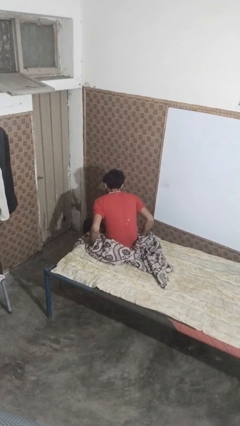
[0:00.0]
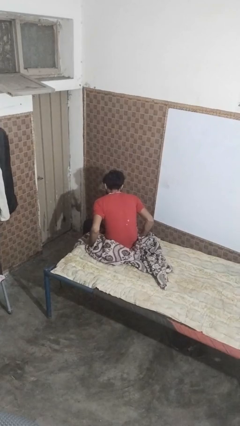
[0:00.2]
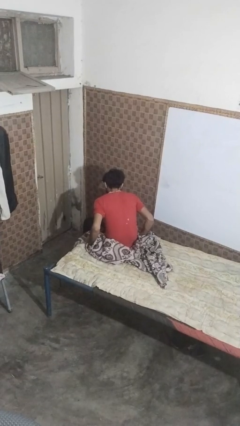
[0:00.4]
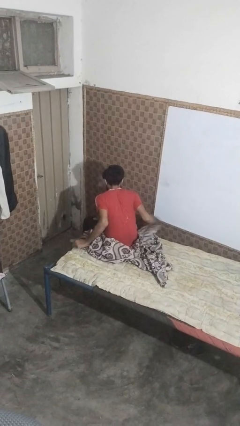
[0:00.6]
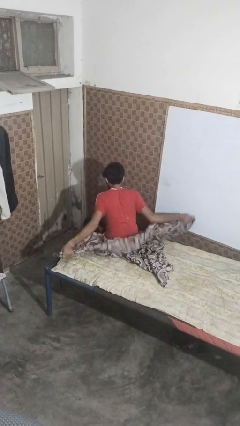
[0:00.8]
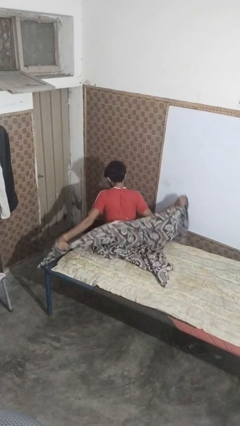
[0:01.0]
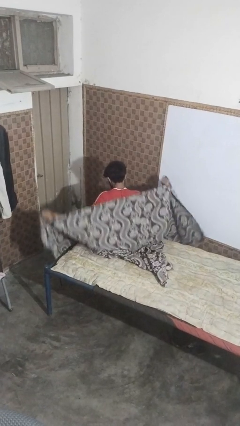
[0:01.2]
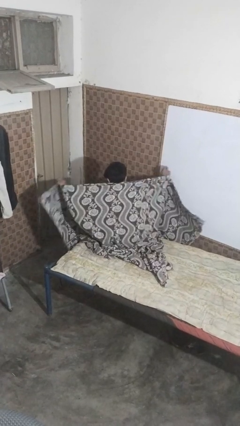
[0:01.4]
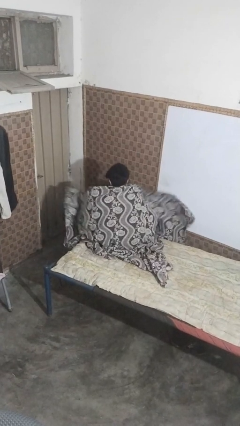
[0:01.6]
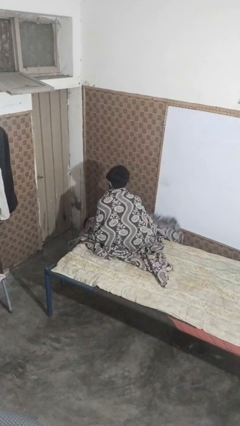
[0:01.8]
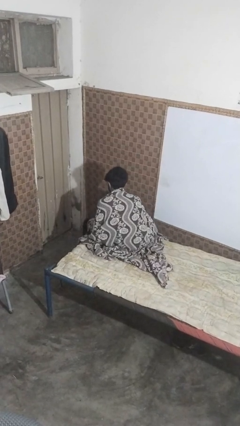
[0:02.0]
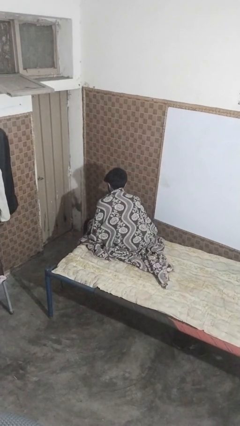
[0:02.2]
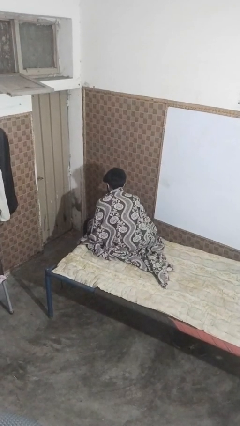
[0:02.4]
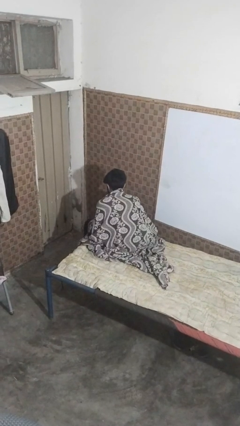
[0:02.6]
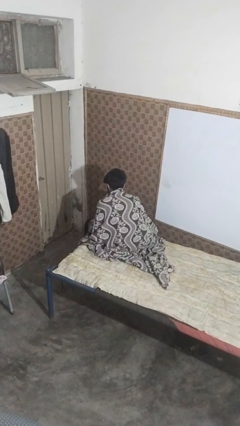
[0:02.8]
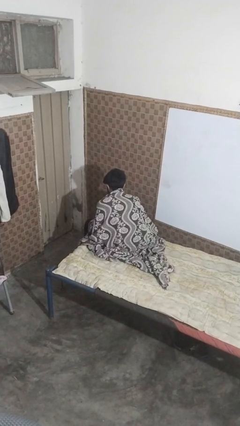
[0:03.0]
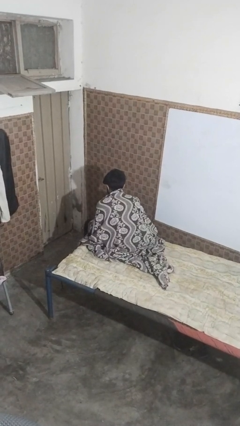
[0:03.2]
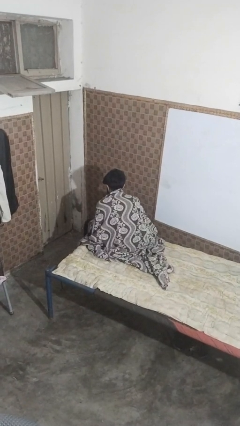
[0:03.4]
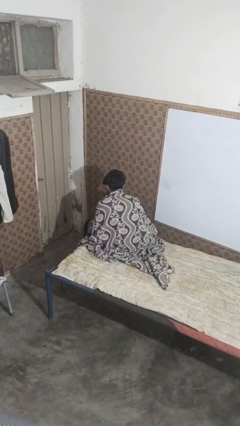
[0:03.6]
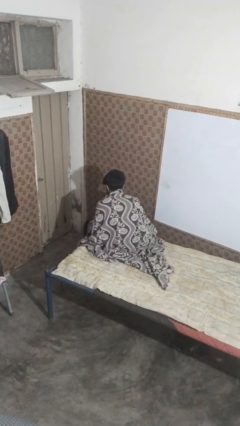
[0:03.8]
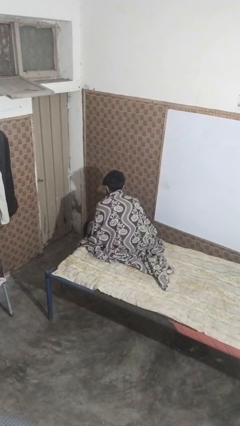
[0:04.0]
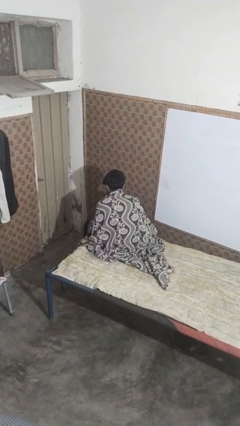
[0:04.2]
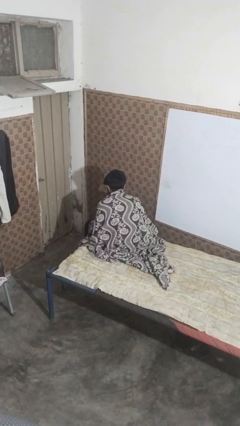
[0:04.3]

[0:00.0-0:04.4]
person covers with bedsheets

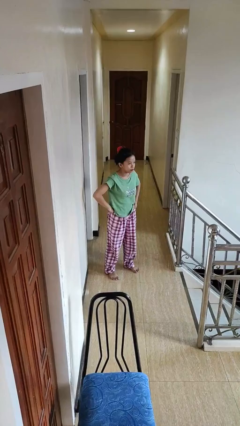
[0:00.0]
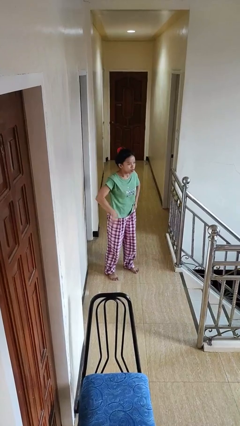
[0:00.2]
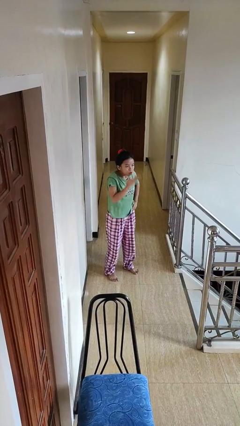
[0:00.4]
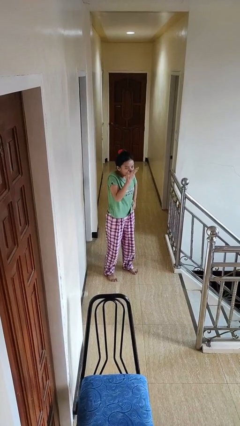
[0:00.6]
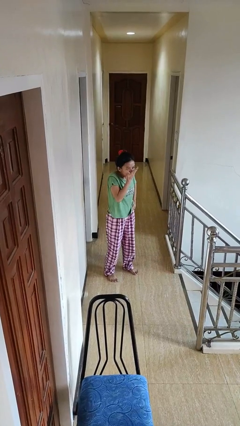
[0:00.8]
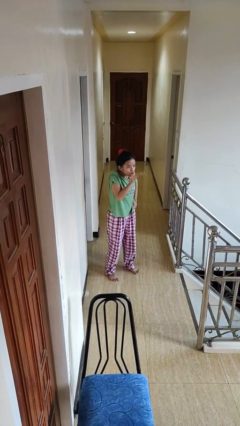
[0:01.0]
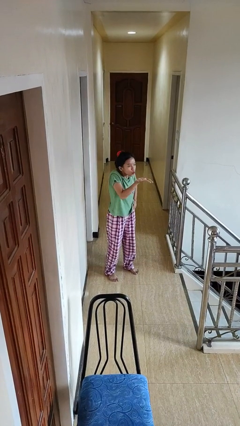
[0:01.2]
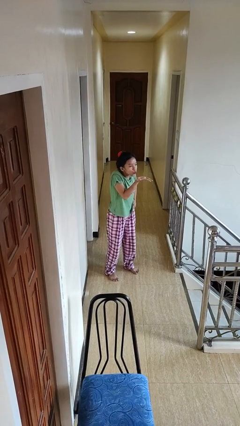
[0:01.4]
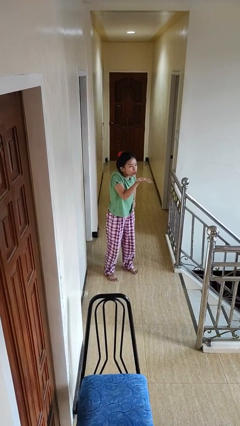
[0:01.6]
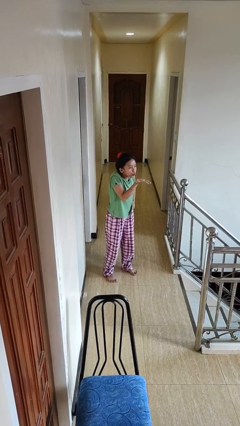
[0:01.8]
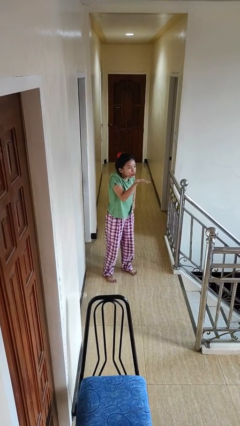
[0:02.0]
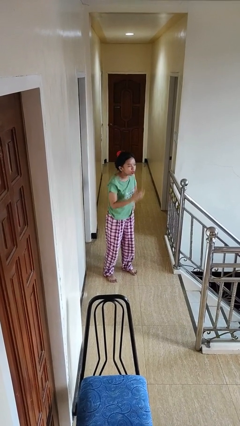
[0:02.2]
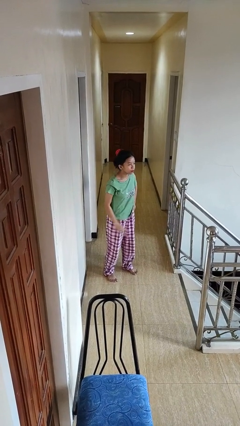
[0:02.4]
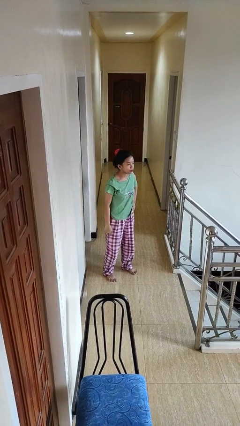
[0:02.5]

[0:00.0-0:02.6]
person gestures blow kiss

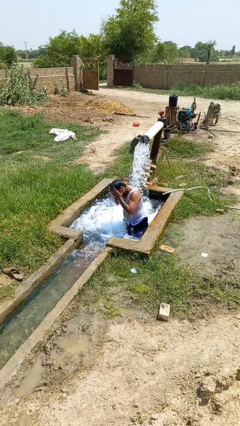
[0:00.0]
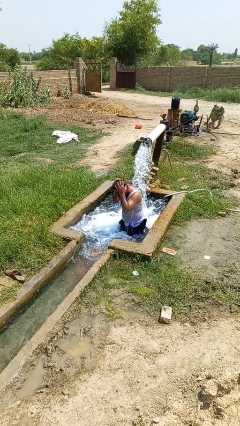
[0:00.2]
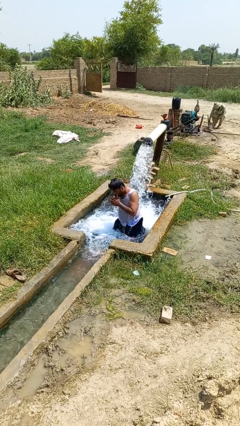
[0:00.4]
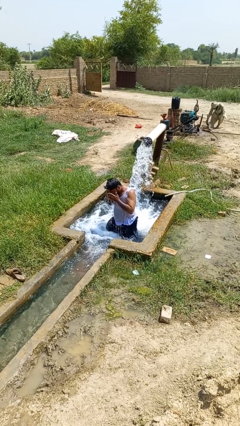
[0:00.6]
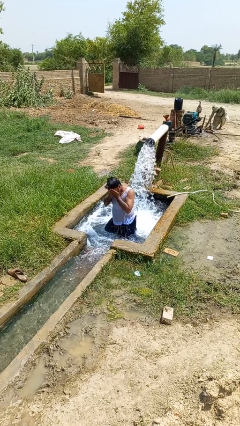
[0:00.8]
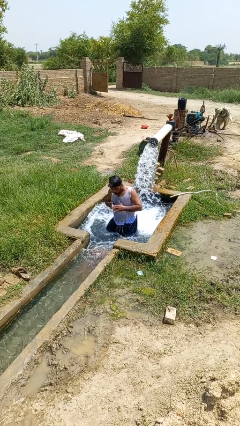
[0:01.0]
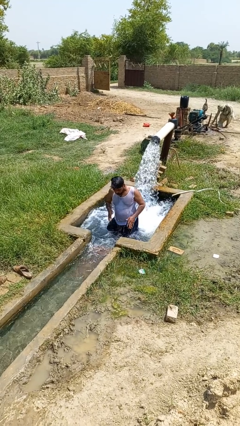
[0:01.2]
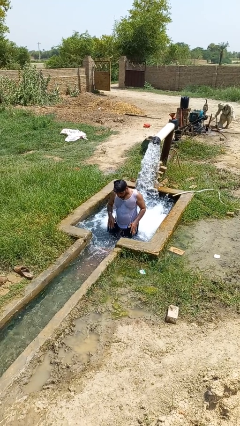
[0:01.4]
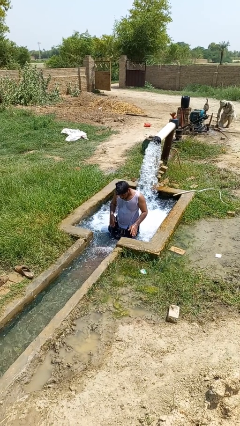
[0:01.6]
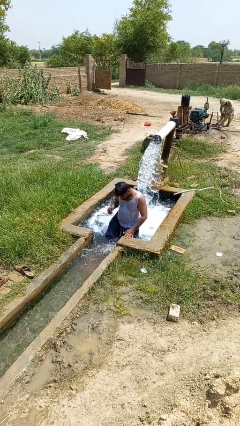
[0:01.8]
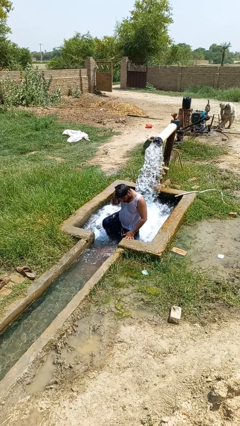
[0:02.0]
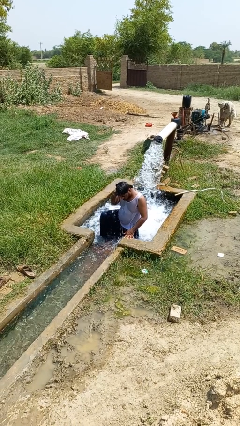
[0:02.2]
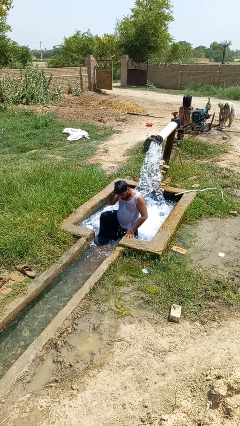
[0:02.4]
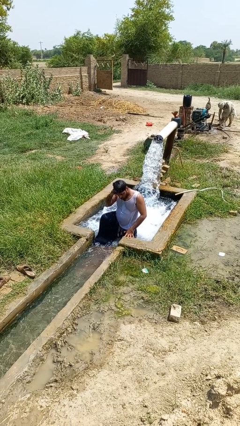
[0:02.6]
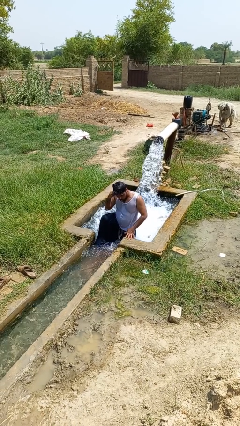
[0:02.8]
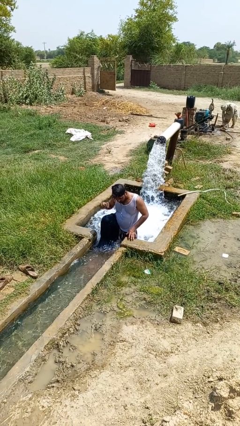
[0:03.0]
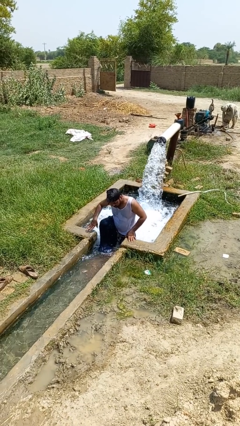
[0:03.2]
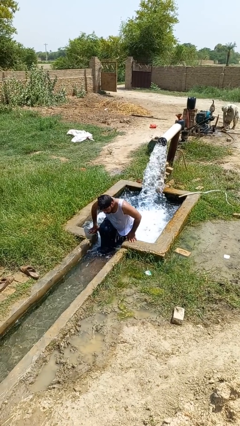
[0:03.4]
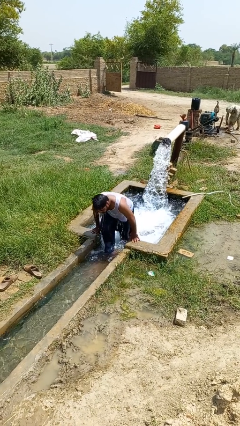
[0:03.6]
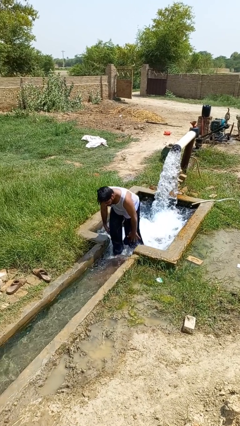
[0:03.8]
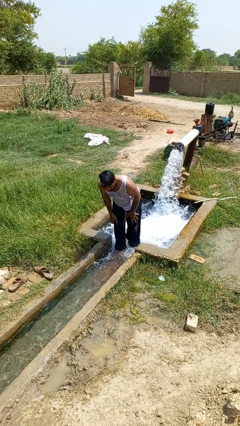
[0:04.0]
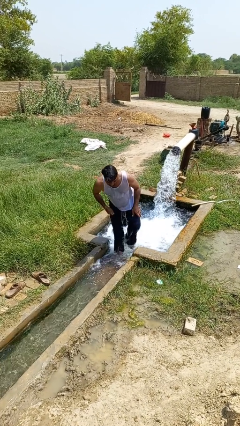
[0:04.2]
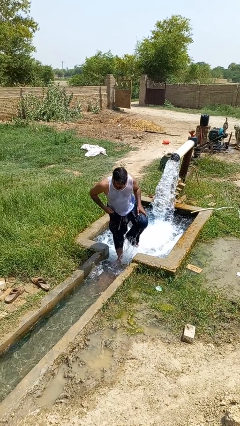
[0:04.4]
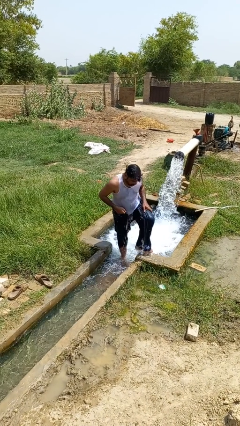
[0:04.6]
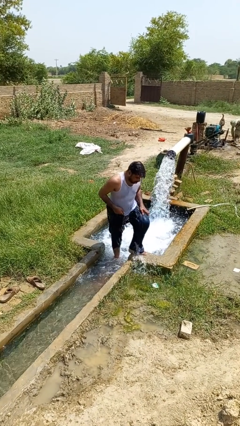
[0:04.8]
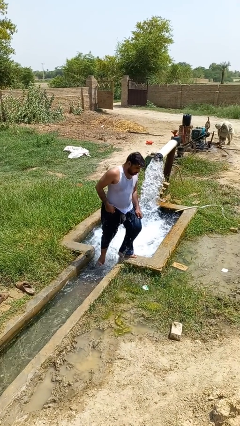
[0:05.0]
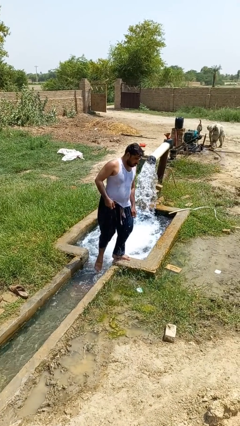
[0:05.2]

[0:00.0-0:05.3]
person exits pool

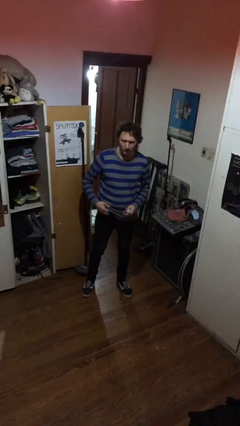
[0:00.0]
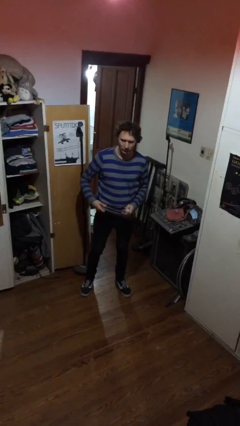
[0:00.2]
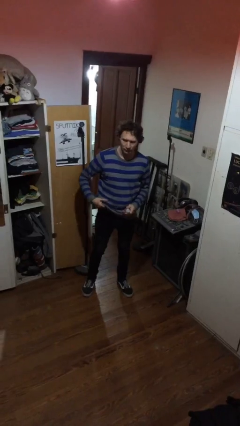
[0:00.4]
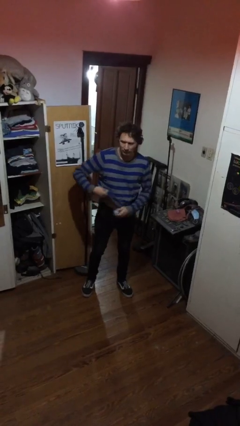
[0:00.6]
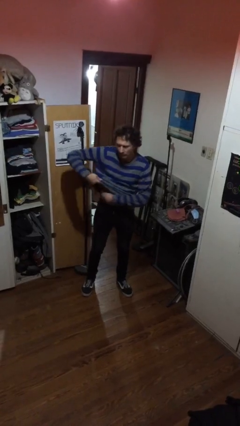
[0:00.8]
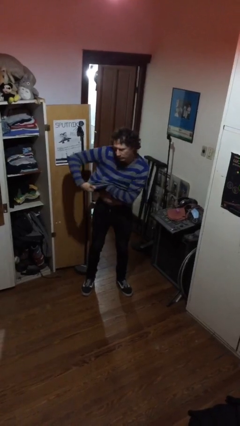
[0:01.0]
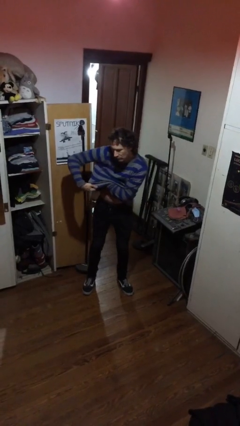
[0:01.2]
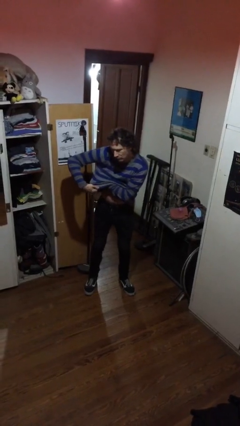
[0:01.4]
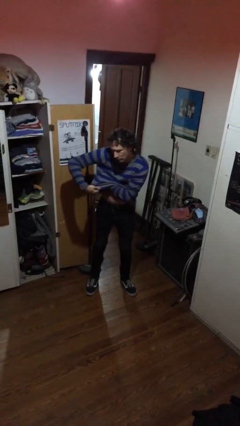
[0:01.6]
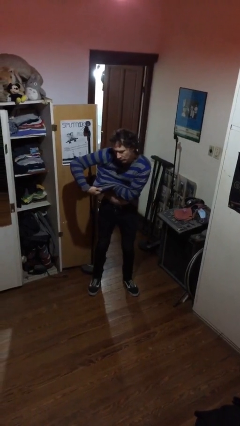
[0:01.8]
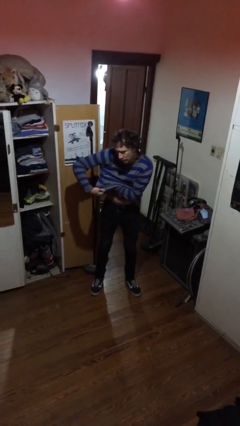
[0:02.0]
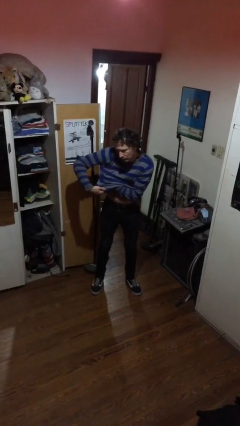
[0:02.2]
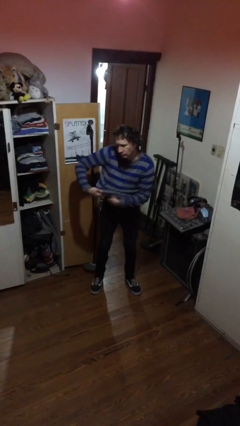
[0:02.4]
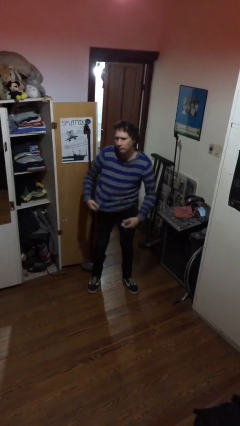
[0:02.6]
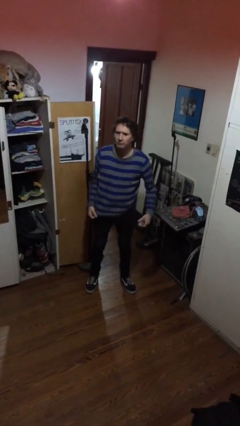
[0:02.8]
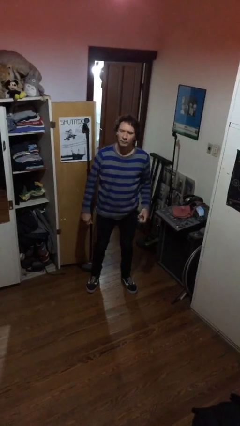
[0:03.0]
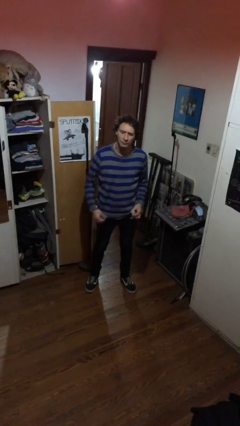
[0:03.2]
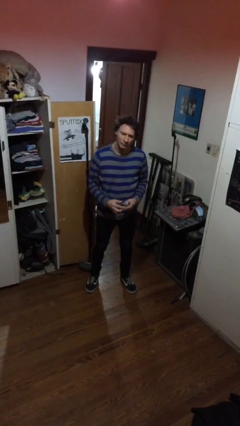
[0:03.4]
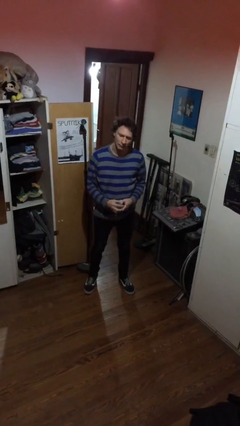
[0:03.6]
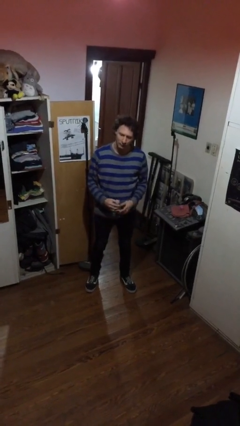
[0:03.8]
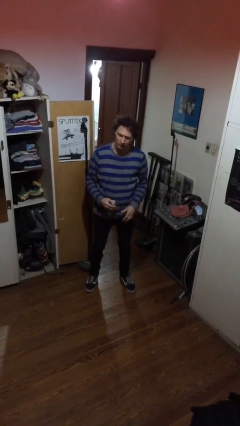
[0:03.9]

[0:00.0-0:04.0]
person applies deodorant

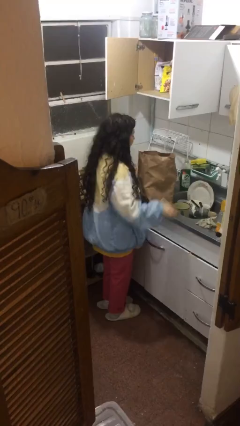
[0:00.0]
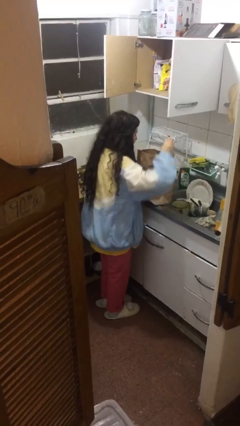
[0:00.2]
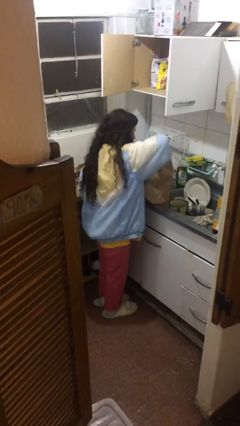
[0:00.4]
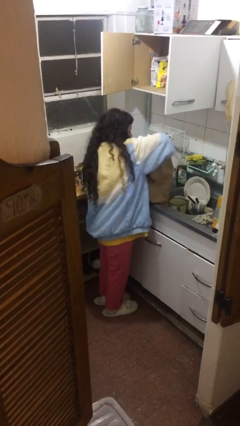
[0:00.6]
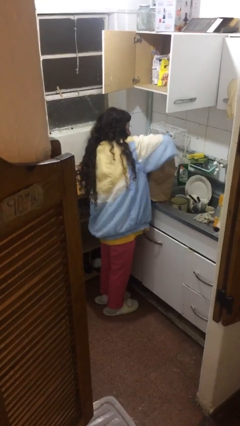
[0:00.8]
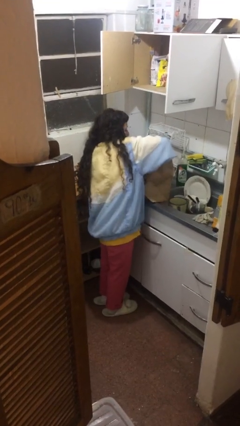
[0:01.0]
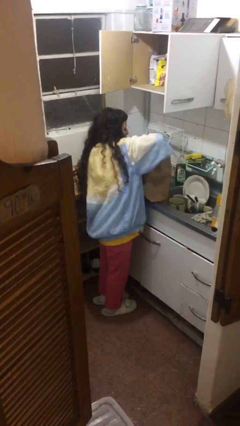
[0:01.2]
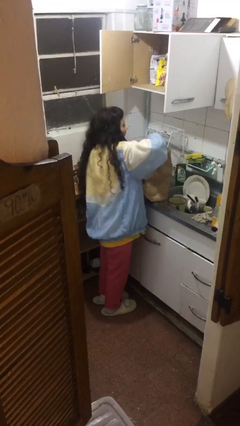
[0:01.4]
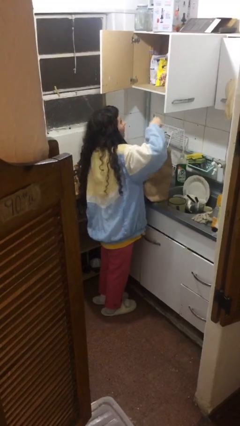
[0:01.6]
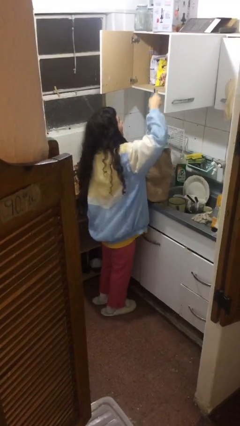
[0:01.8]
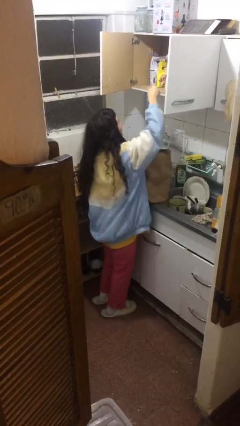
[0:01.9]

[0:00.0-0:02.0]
person loads groceries into cabinet
